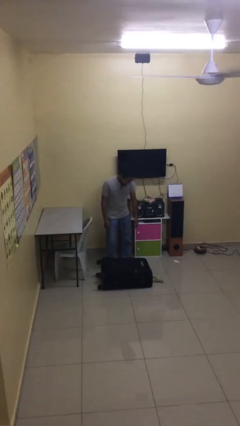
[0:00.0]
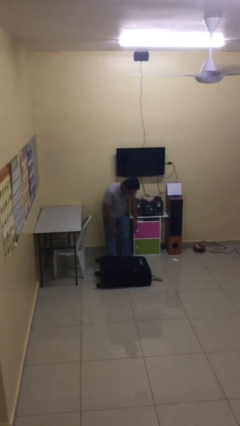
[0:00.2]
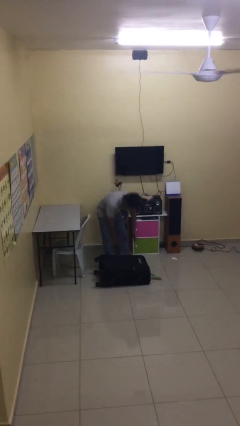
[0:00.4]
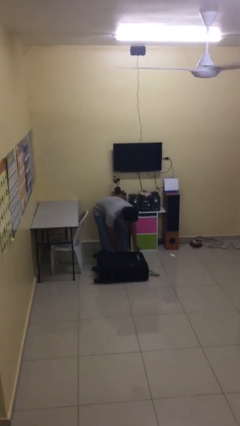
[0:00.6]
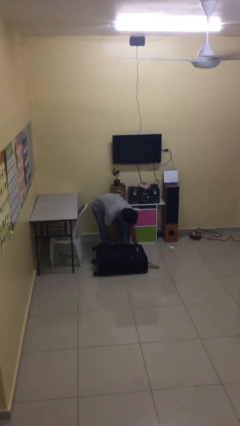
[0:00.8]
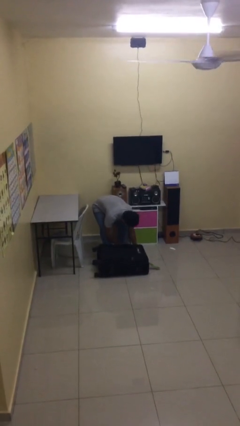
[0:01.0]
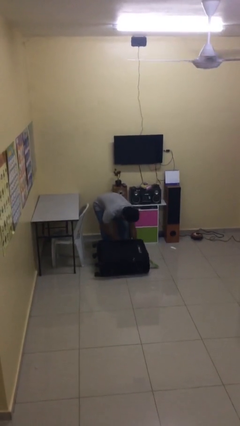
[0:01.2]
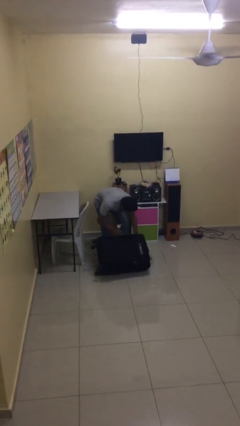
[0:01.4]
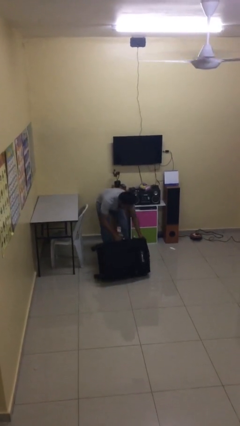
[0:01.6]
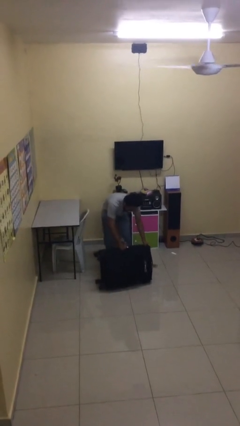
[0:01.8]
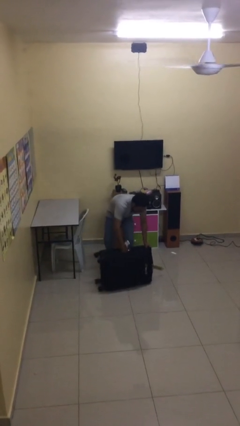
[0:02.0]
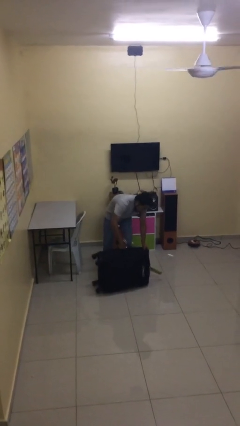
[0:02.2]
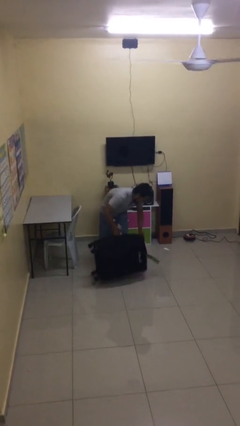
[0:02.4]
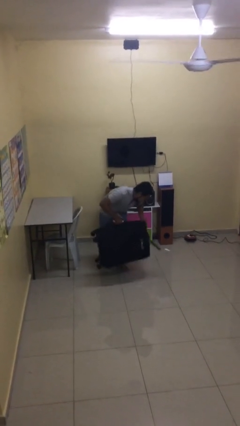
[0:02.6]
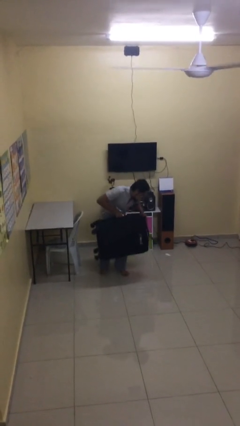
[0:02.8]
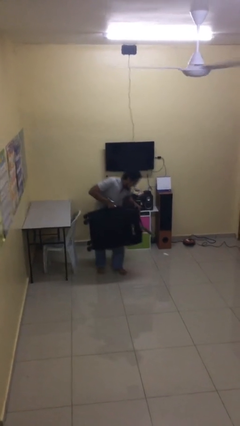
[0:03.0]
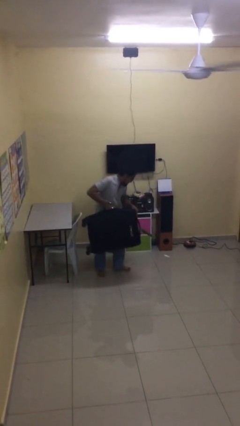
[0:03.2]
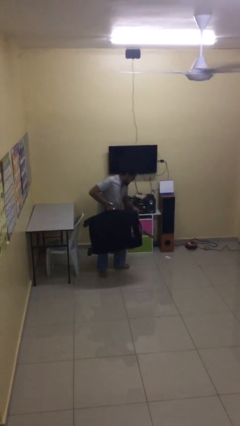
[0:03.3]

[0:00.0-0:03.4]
person picks up object from floor

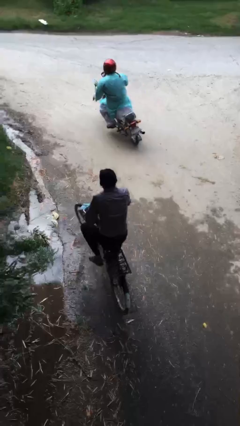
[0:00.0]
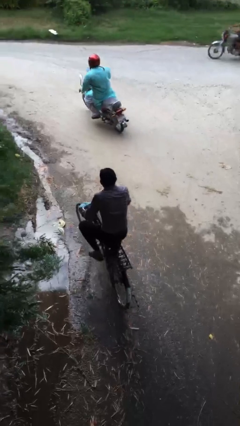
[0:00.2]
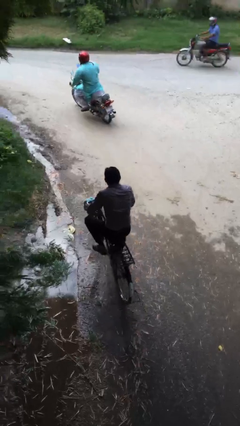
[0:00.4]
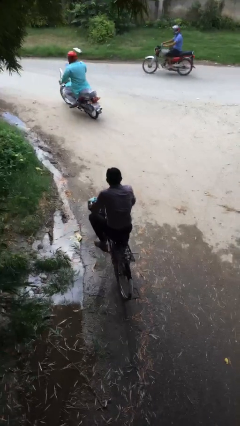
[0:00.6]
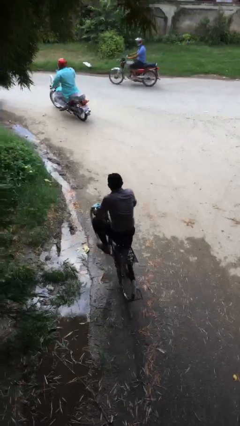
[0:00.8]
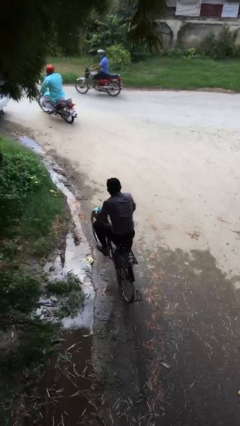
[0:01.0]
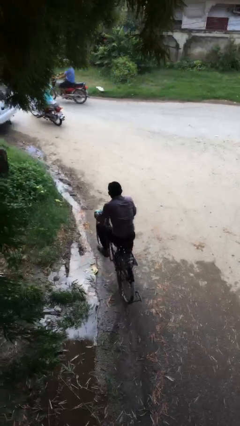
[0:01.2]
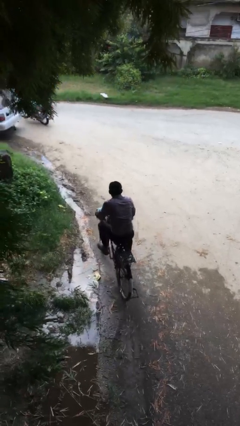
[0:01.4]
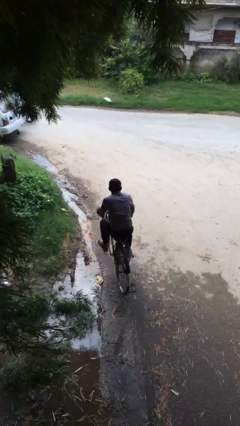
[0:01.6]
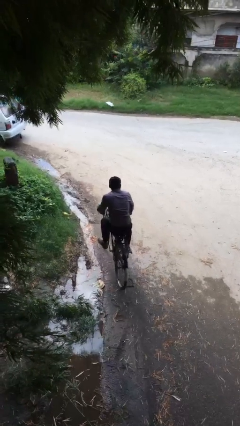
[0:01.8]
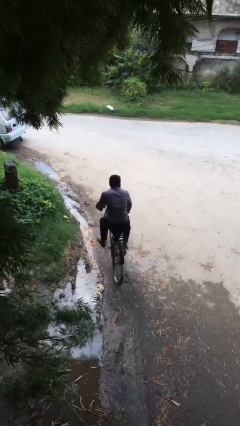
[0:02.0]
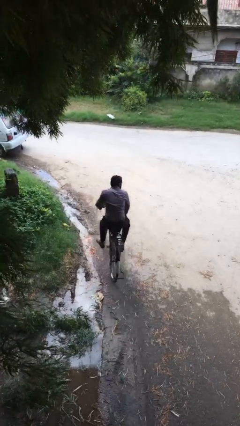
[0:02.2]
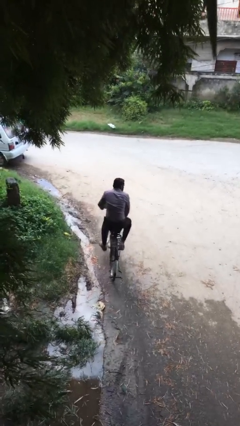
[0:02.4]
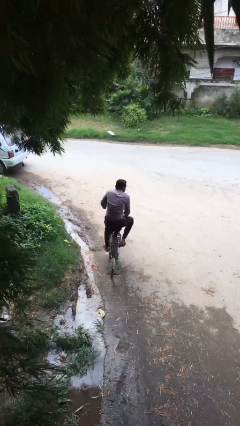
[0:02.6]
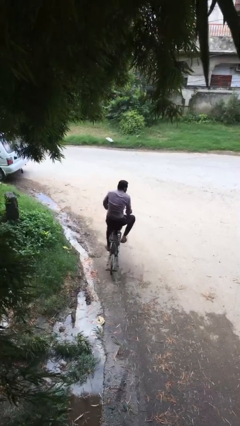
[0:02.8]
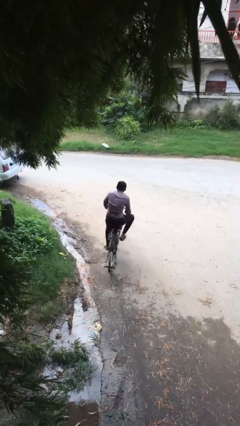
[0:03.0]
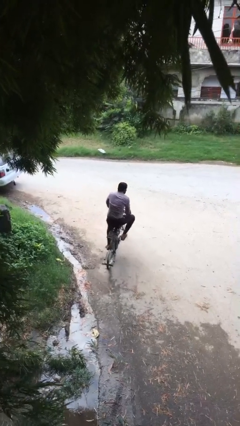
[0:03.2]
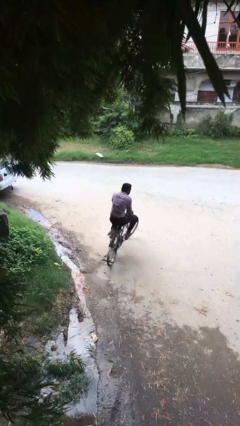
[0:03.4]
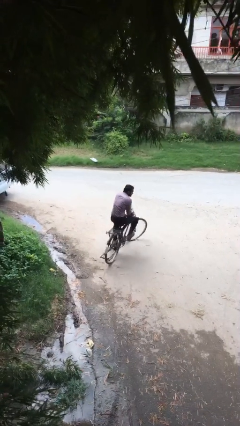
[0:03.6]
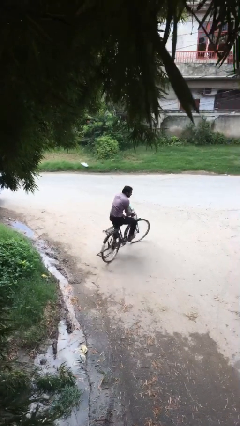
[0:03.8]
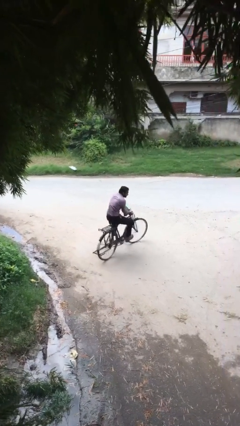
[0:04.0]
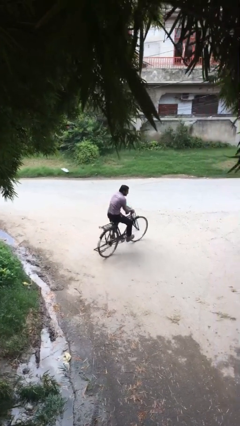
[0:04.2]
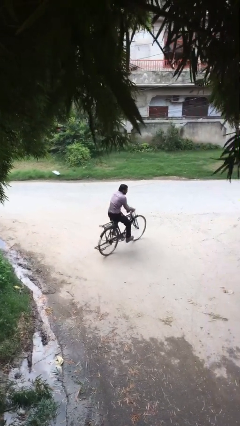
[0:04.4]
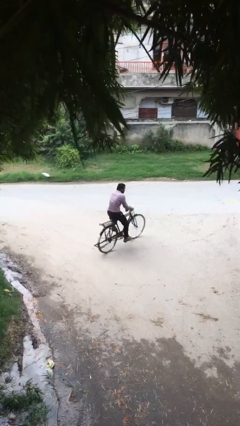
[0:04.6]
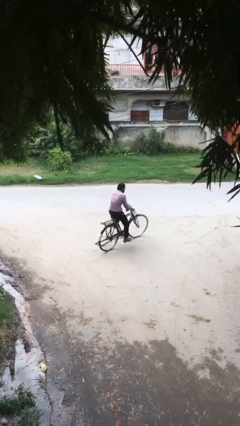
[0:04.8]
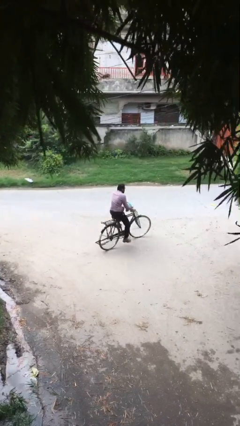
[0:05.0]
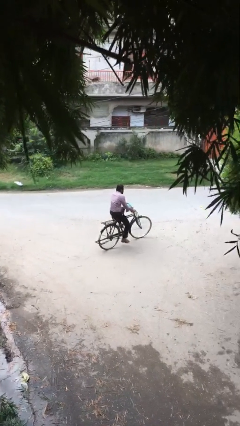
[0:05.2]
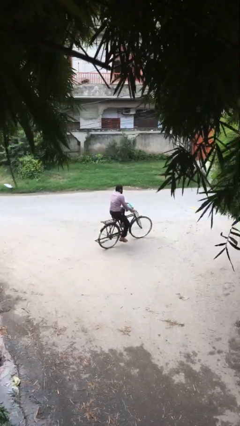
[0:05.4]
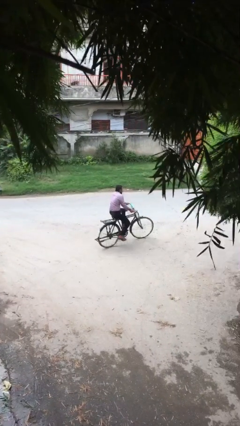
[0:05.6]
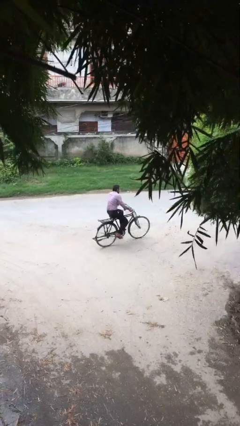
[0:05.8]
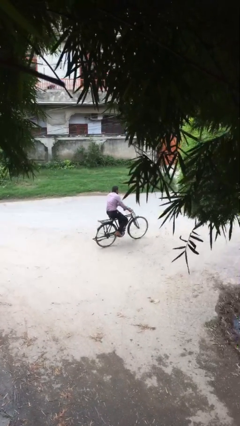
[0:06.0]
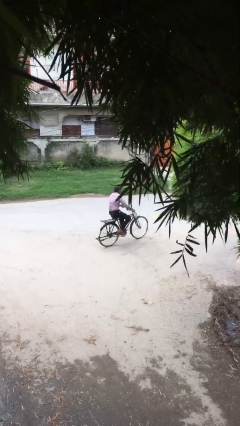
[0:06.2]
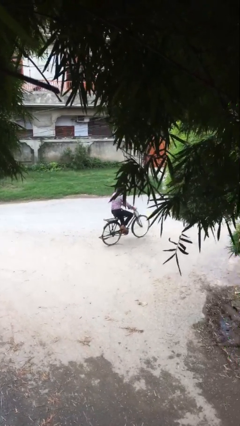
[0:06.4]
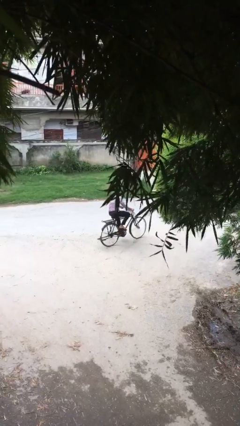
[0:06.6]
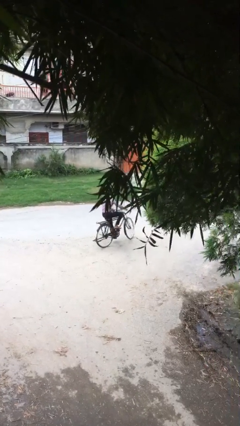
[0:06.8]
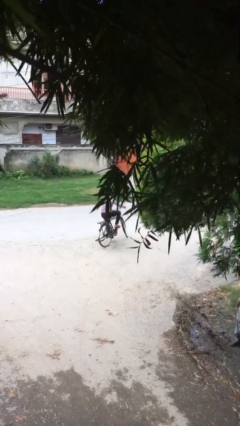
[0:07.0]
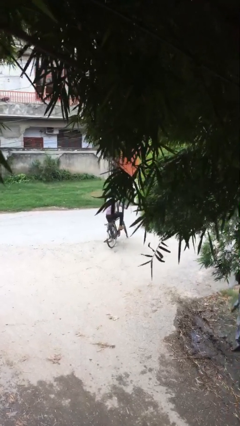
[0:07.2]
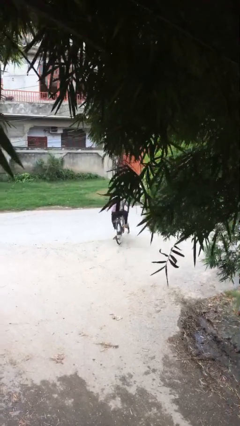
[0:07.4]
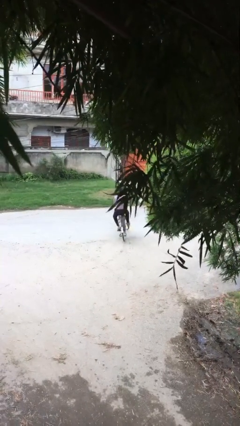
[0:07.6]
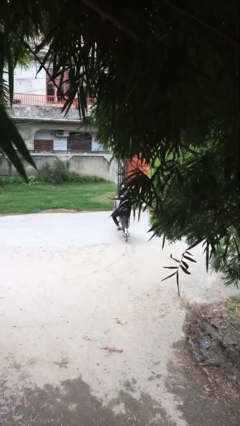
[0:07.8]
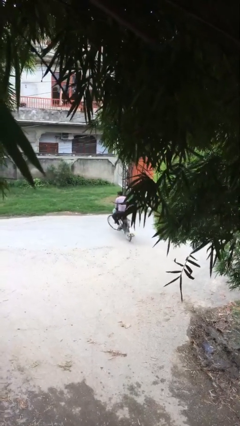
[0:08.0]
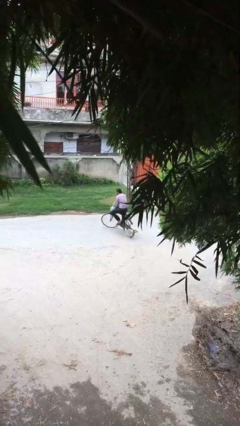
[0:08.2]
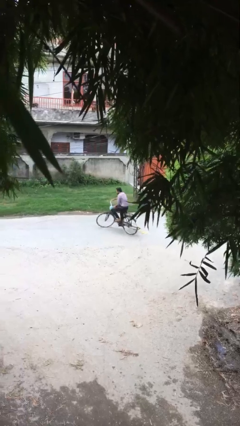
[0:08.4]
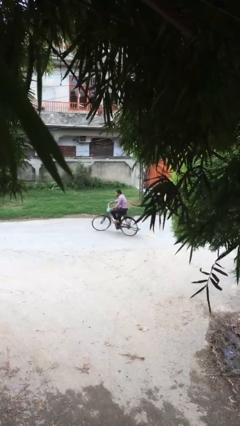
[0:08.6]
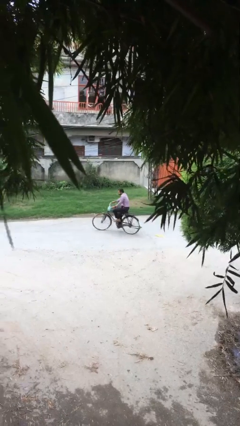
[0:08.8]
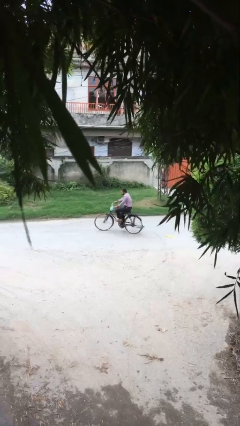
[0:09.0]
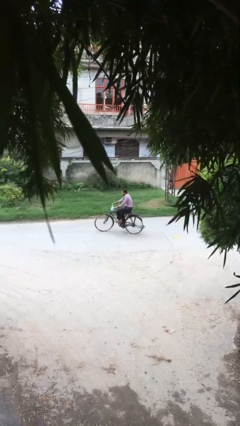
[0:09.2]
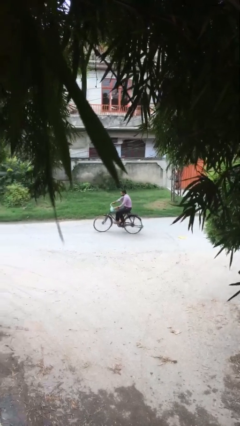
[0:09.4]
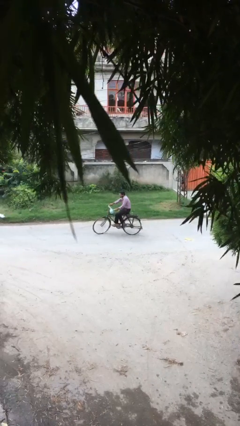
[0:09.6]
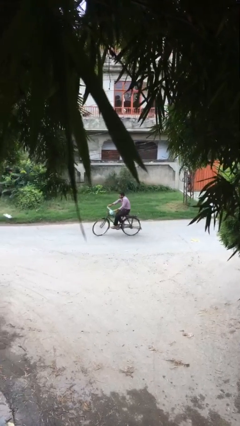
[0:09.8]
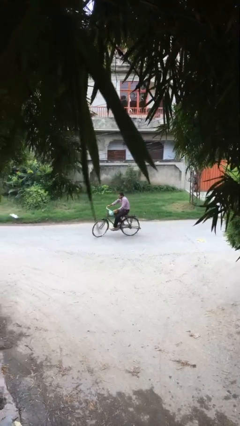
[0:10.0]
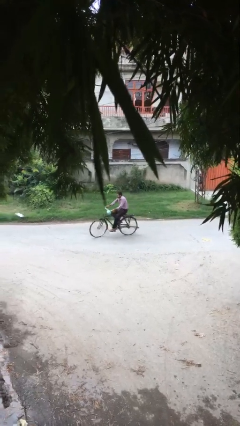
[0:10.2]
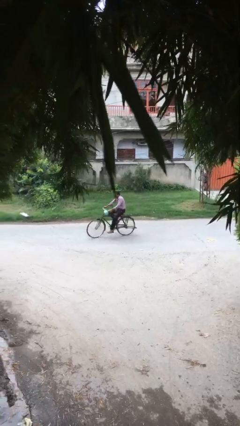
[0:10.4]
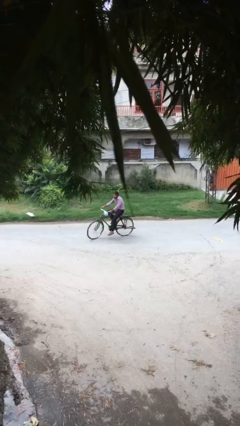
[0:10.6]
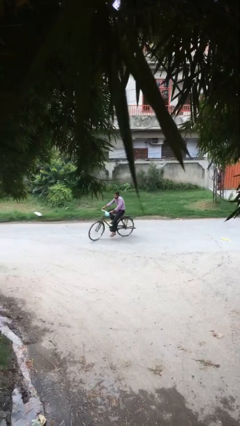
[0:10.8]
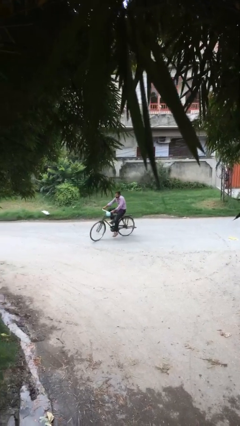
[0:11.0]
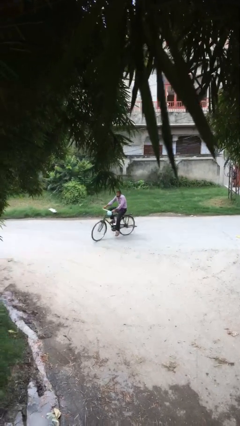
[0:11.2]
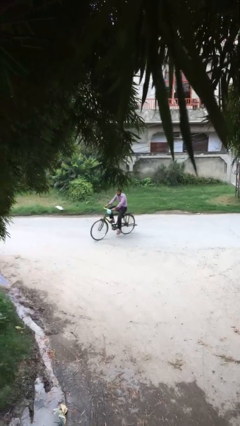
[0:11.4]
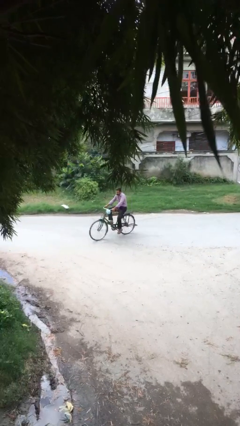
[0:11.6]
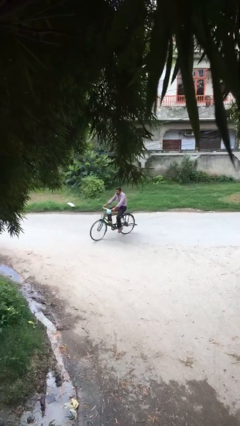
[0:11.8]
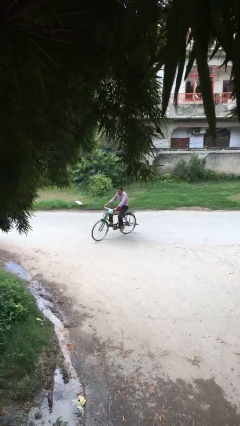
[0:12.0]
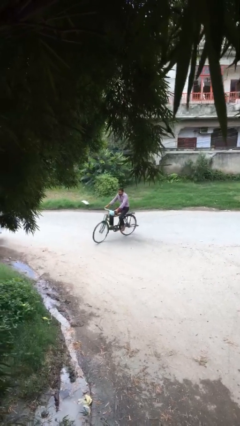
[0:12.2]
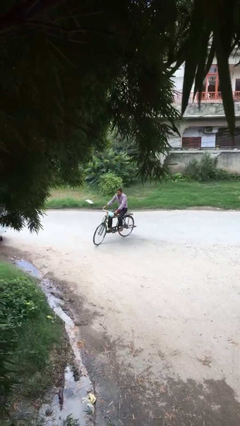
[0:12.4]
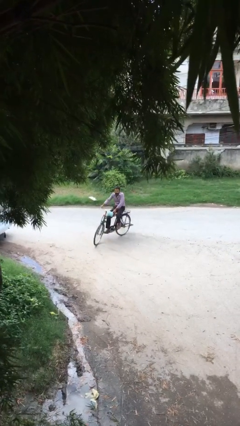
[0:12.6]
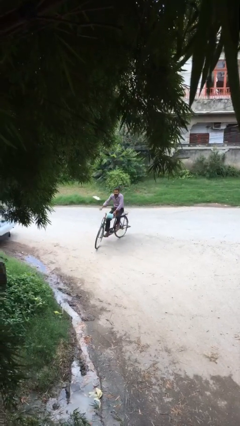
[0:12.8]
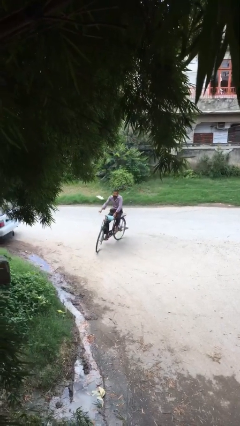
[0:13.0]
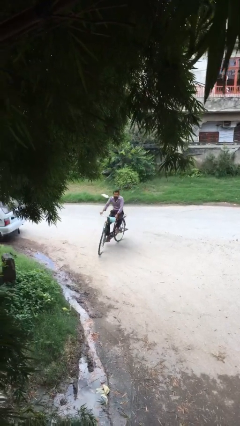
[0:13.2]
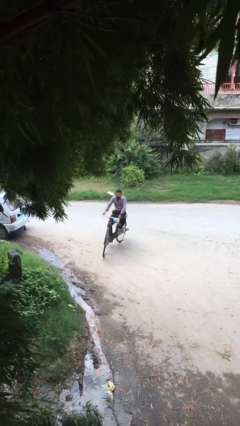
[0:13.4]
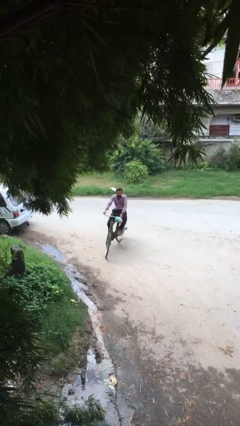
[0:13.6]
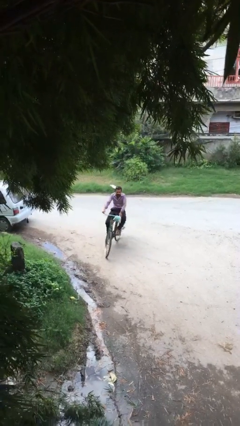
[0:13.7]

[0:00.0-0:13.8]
person rides bicycle

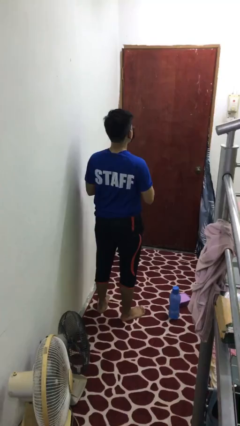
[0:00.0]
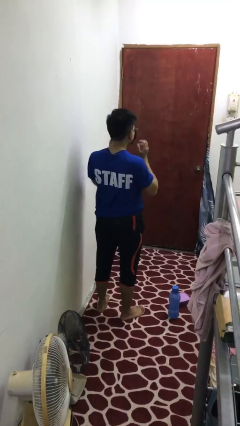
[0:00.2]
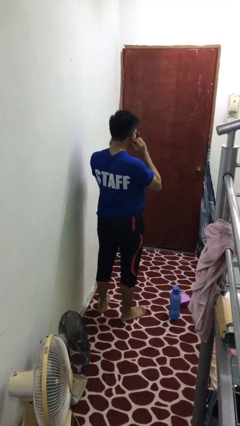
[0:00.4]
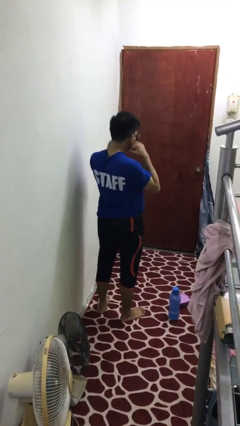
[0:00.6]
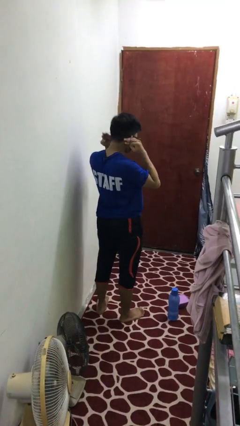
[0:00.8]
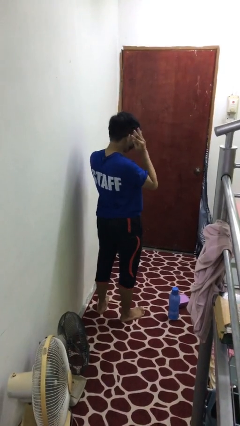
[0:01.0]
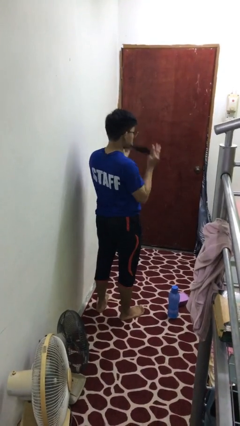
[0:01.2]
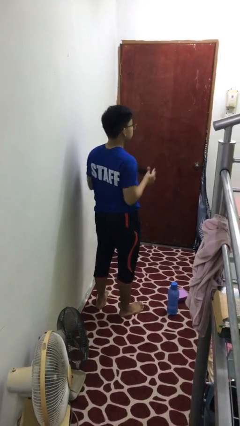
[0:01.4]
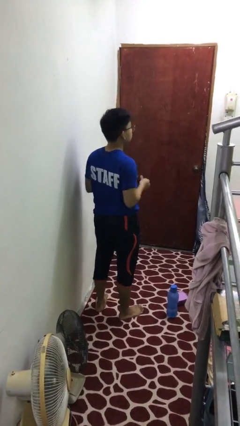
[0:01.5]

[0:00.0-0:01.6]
person takes off facemask
